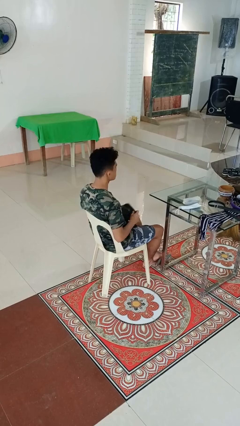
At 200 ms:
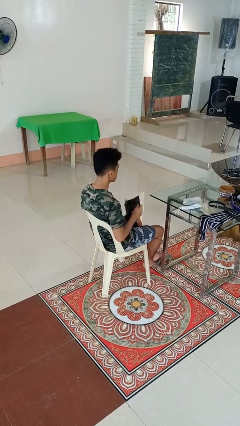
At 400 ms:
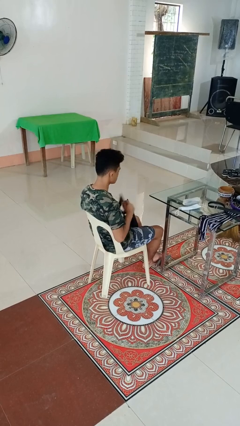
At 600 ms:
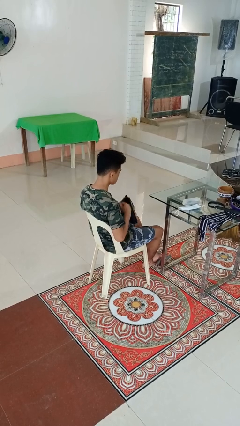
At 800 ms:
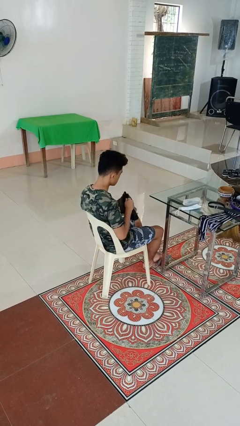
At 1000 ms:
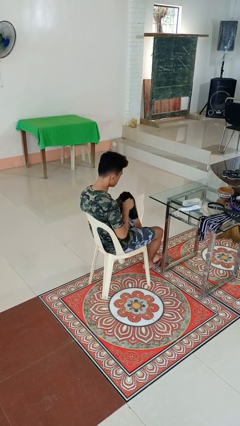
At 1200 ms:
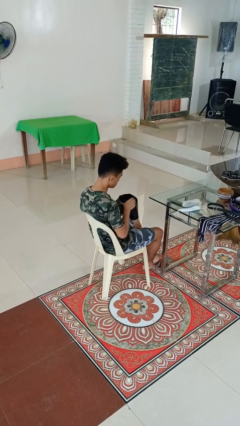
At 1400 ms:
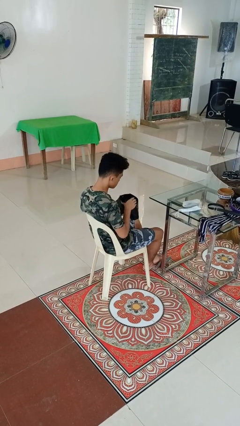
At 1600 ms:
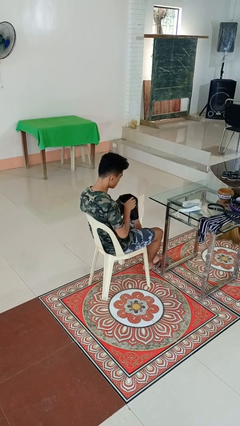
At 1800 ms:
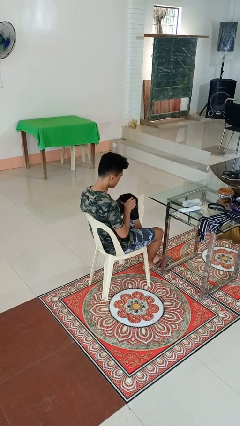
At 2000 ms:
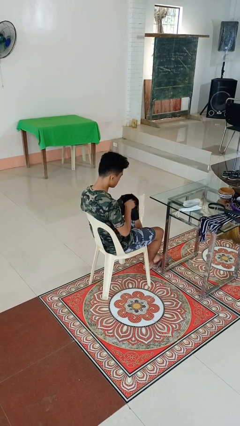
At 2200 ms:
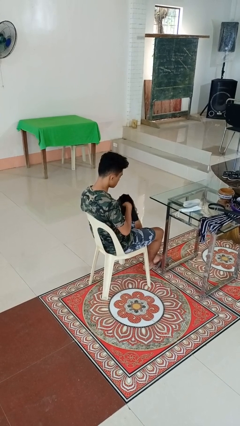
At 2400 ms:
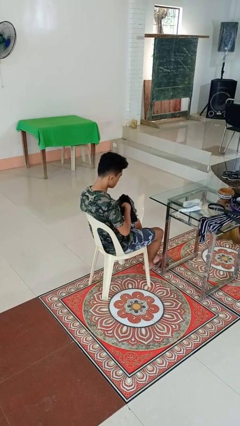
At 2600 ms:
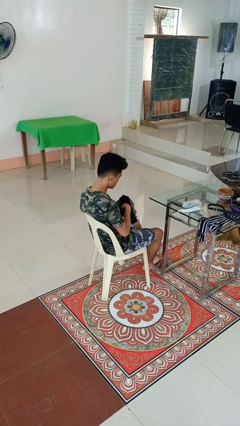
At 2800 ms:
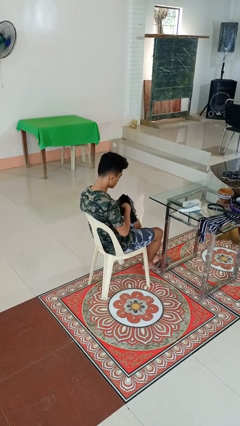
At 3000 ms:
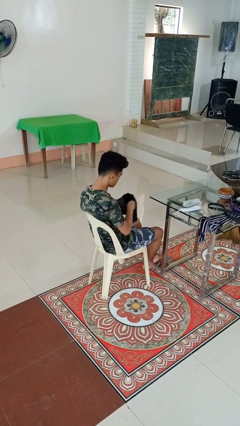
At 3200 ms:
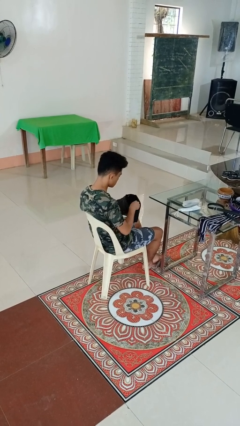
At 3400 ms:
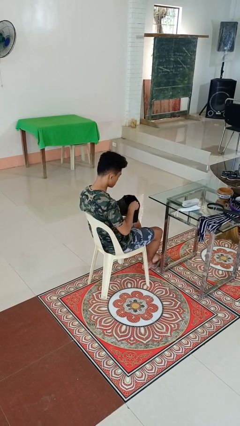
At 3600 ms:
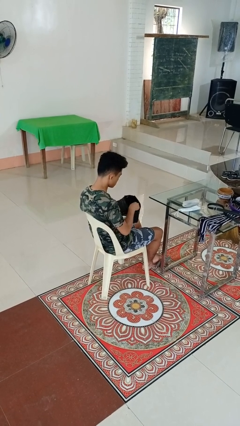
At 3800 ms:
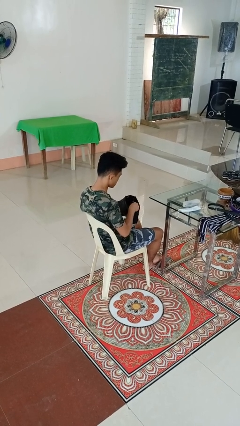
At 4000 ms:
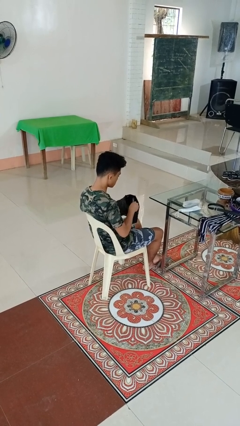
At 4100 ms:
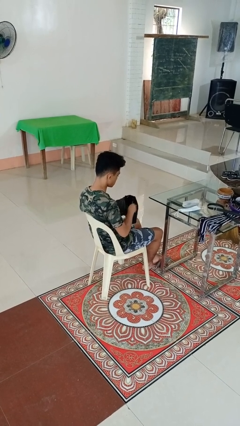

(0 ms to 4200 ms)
person searches in purse

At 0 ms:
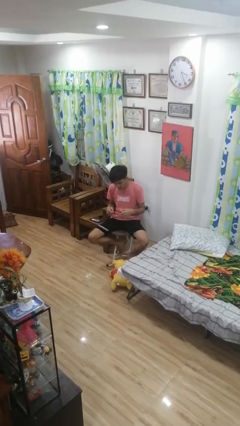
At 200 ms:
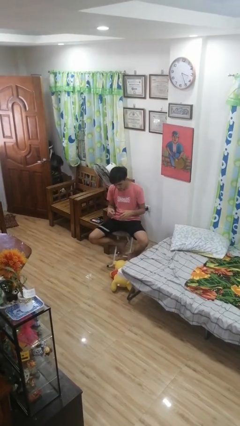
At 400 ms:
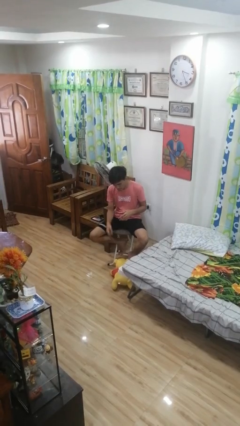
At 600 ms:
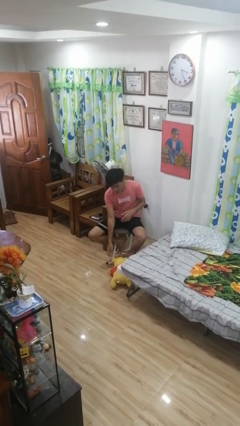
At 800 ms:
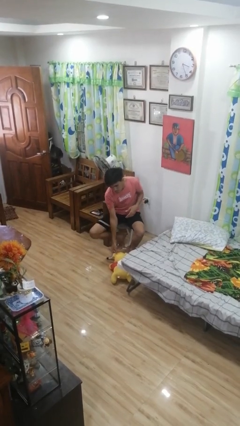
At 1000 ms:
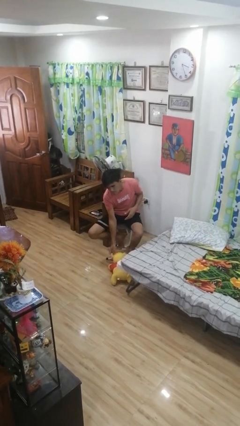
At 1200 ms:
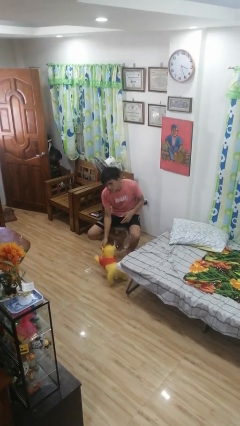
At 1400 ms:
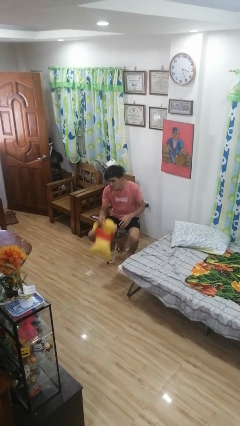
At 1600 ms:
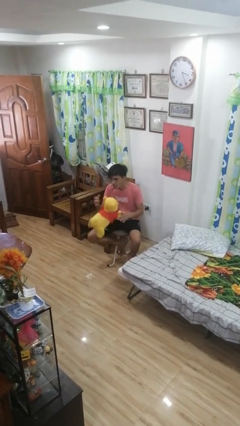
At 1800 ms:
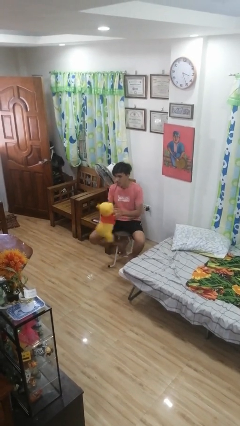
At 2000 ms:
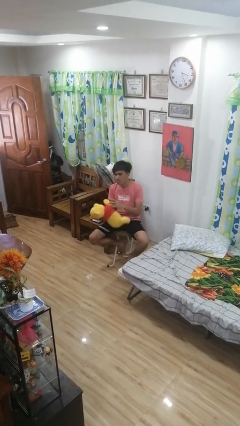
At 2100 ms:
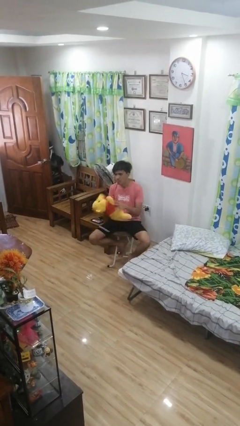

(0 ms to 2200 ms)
person picks up object from floor

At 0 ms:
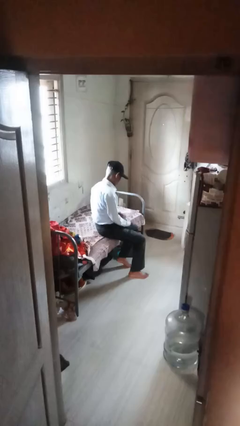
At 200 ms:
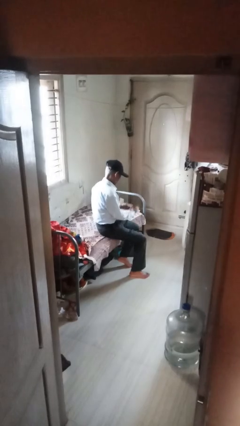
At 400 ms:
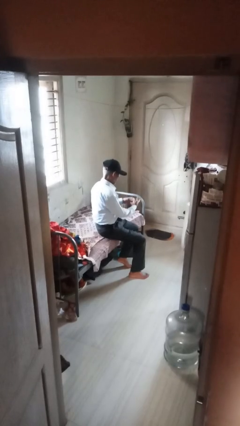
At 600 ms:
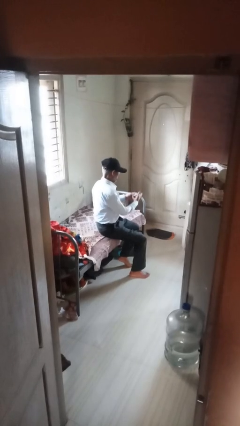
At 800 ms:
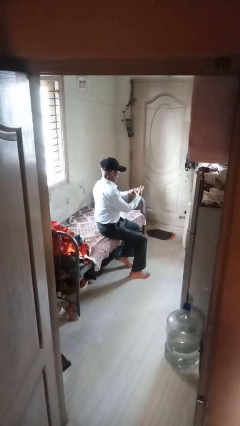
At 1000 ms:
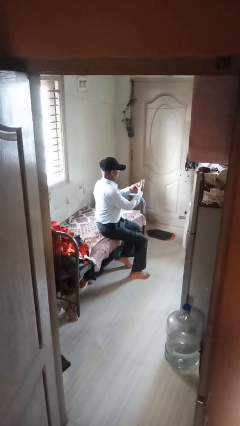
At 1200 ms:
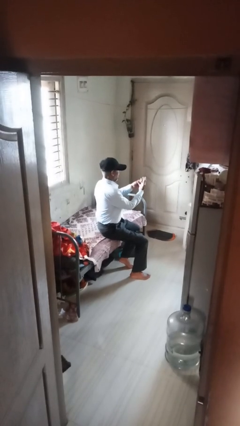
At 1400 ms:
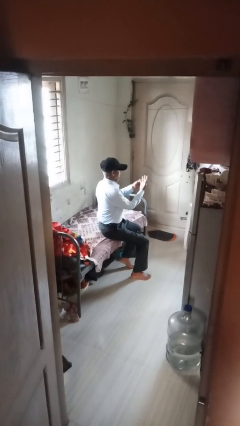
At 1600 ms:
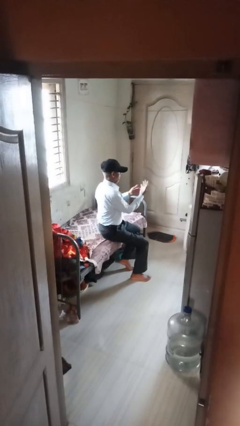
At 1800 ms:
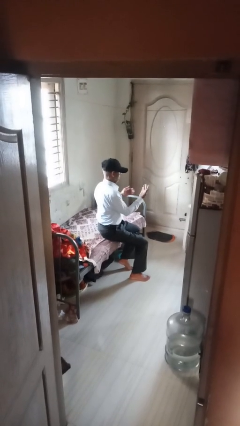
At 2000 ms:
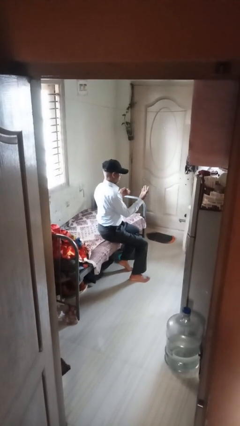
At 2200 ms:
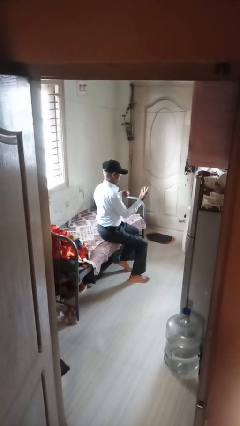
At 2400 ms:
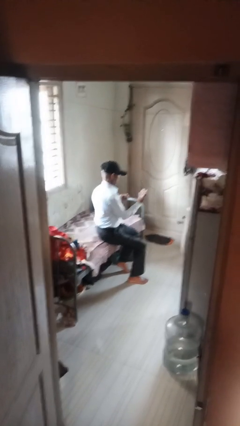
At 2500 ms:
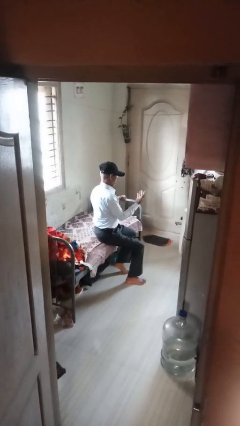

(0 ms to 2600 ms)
person puts on ring

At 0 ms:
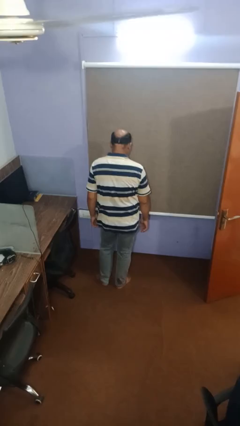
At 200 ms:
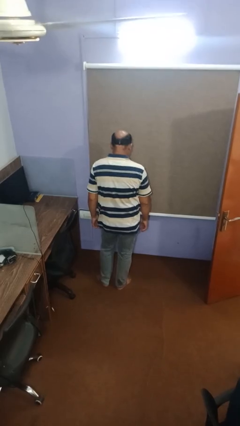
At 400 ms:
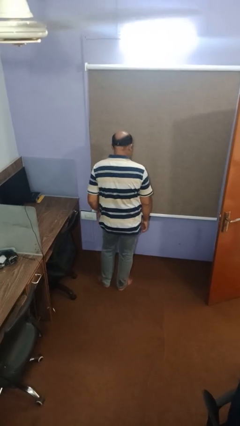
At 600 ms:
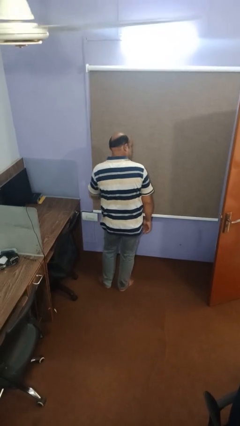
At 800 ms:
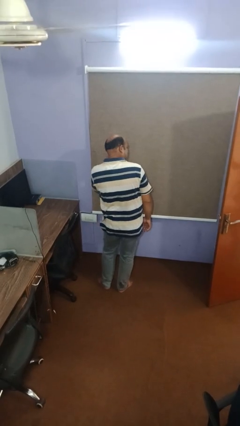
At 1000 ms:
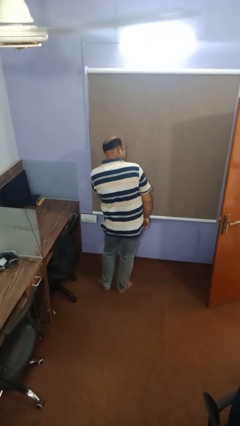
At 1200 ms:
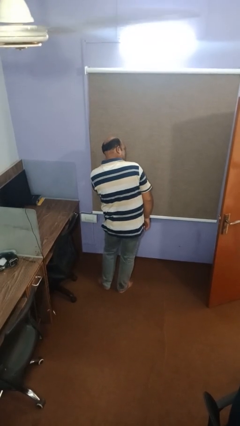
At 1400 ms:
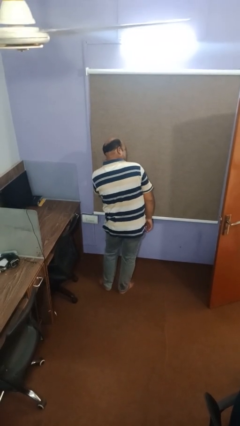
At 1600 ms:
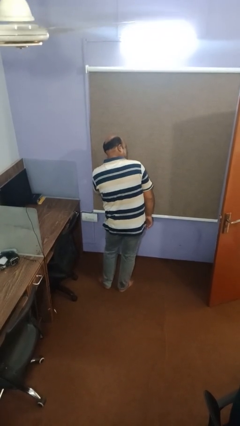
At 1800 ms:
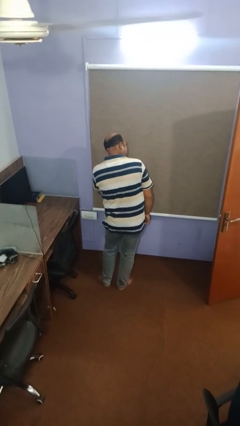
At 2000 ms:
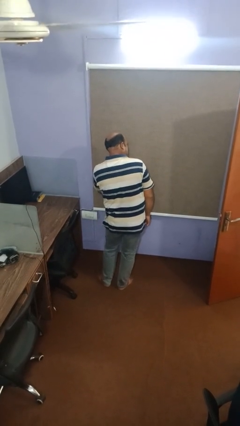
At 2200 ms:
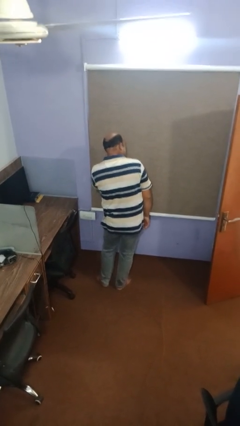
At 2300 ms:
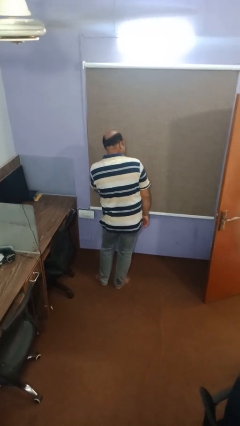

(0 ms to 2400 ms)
person scratches face

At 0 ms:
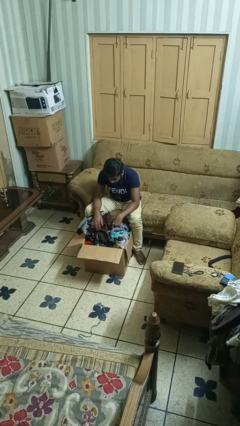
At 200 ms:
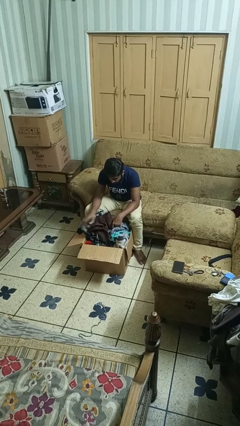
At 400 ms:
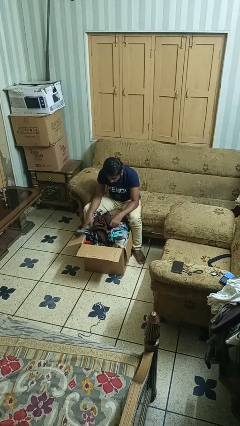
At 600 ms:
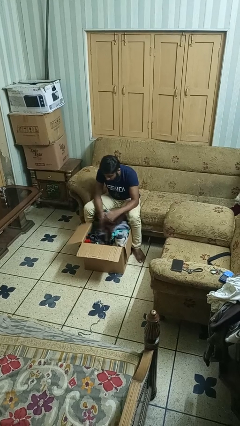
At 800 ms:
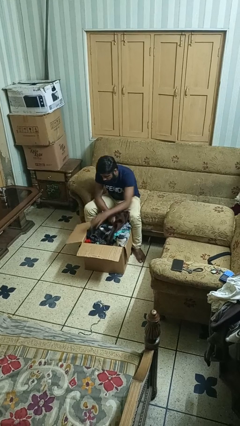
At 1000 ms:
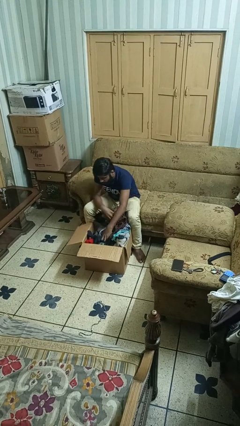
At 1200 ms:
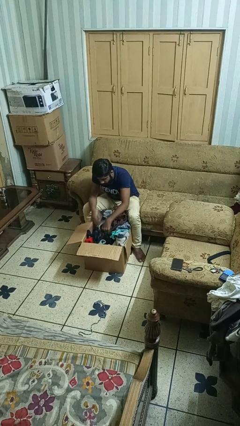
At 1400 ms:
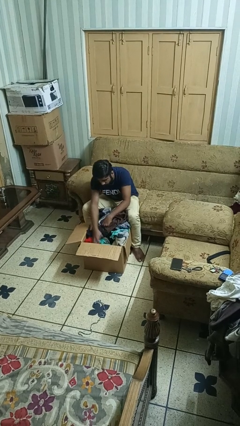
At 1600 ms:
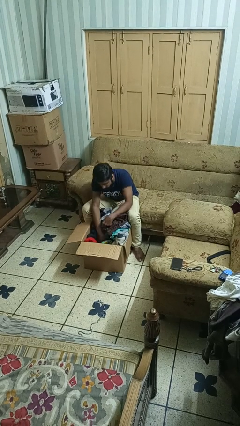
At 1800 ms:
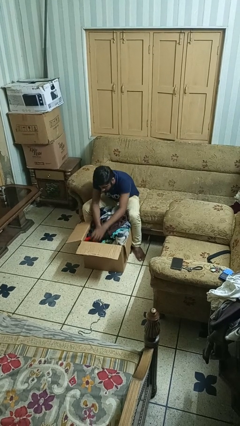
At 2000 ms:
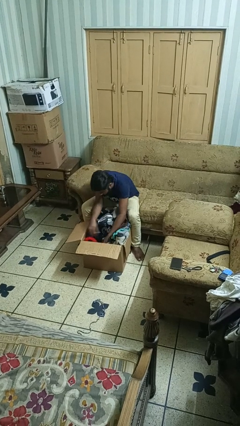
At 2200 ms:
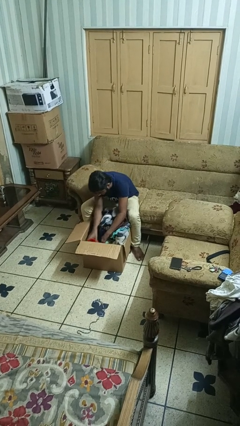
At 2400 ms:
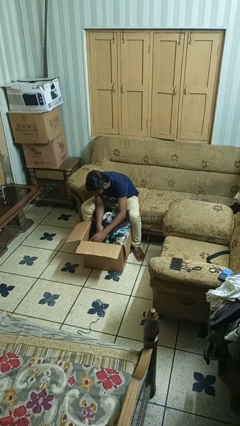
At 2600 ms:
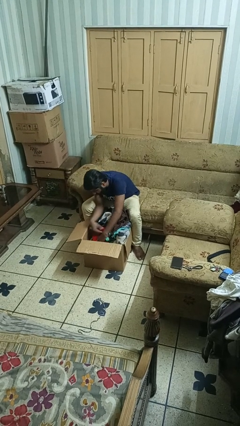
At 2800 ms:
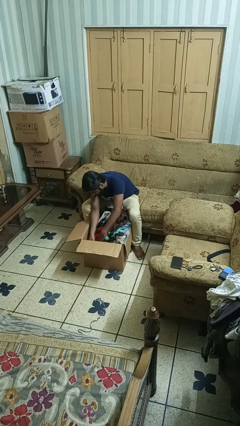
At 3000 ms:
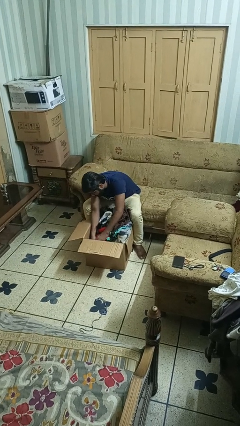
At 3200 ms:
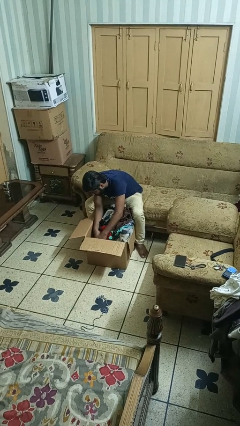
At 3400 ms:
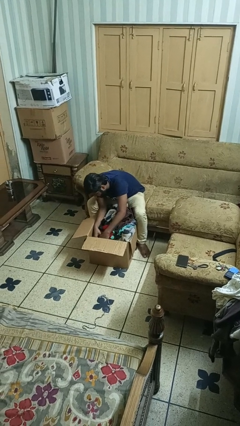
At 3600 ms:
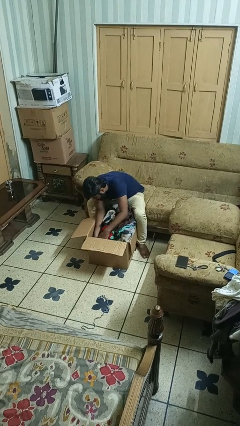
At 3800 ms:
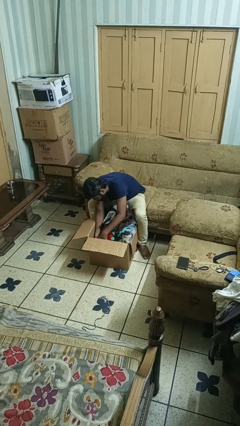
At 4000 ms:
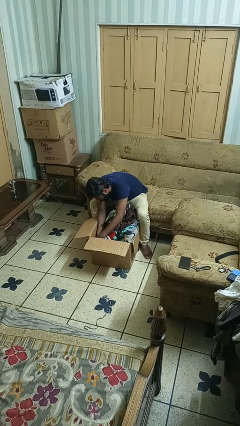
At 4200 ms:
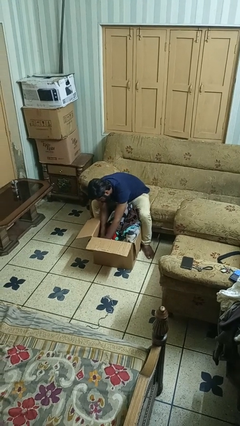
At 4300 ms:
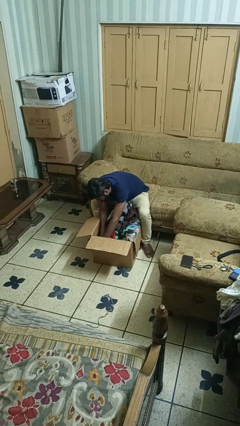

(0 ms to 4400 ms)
person searches in box

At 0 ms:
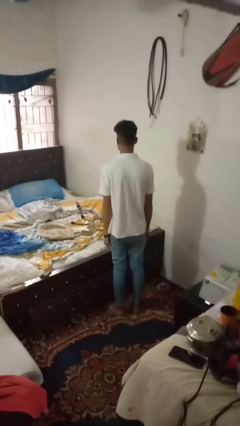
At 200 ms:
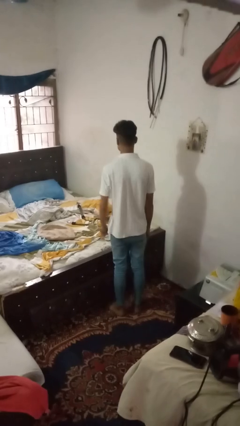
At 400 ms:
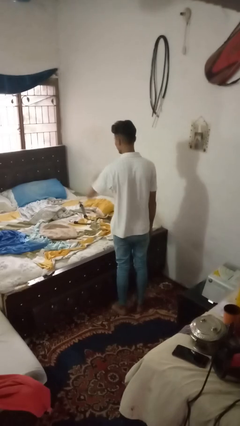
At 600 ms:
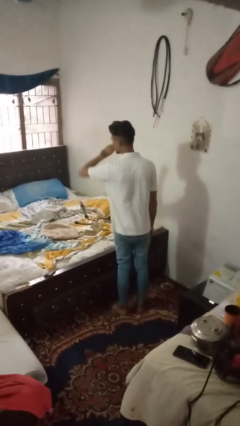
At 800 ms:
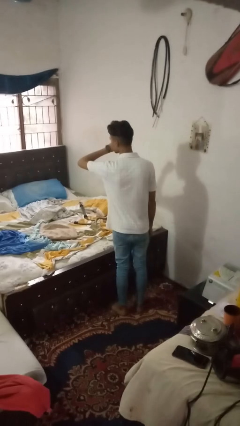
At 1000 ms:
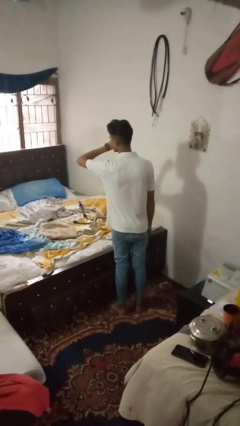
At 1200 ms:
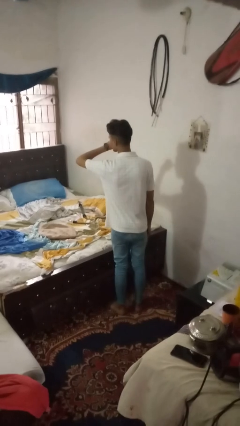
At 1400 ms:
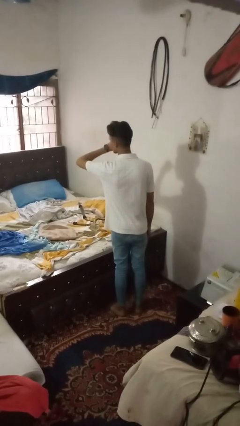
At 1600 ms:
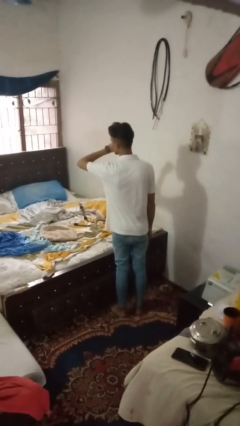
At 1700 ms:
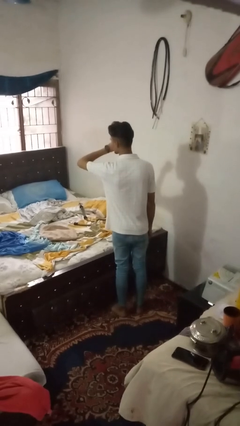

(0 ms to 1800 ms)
person gestures watch closely
